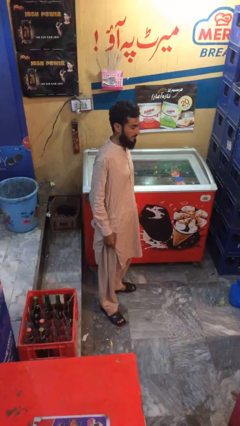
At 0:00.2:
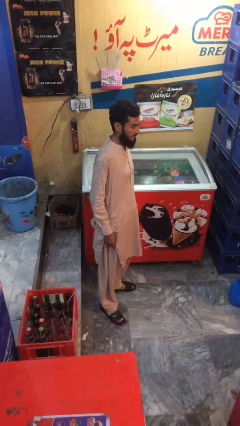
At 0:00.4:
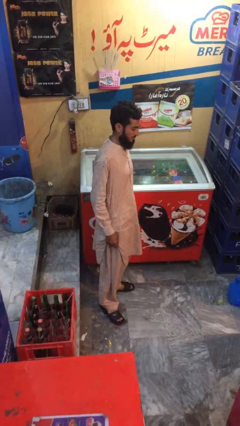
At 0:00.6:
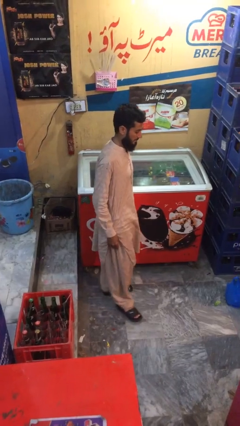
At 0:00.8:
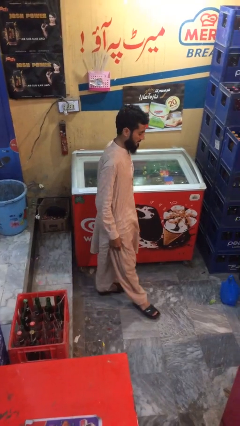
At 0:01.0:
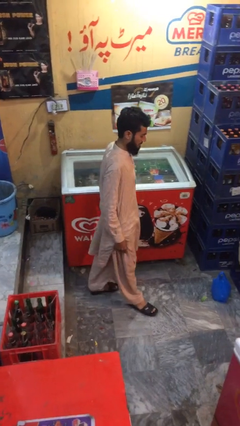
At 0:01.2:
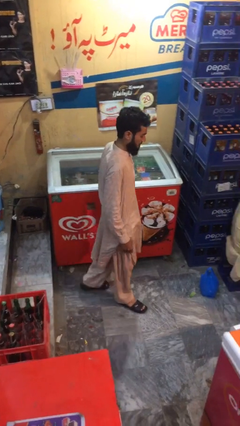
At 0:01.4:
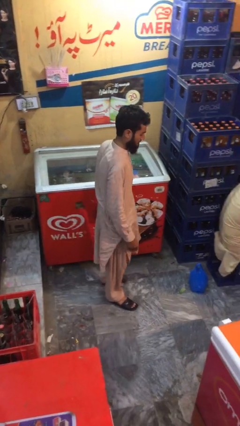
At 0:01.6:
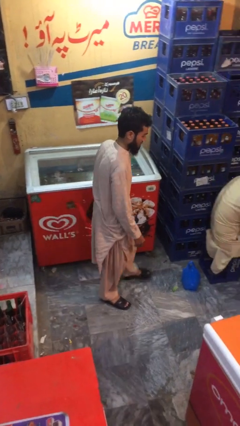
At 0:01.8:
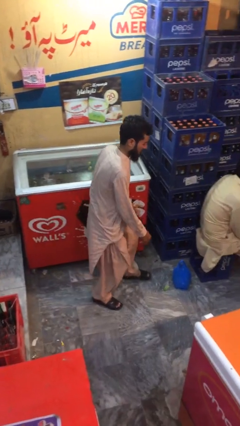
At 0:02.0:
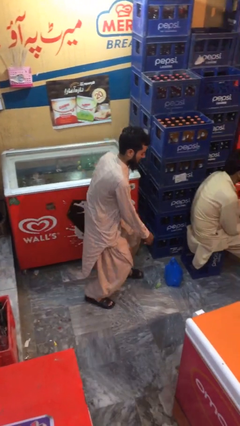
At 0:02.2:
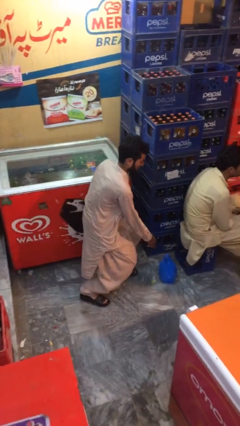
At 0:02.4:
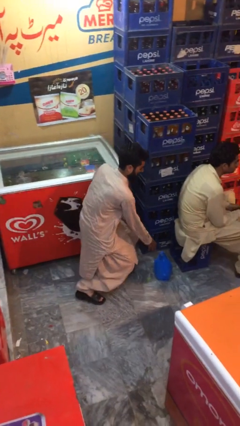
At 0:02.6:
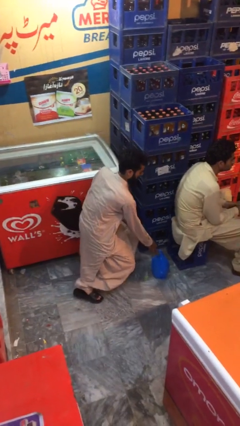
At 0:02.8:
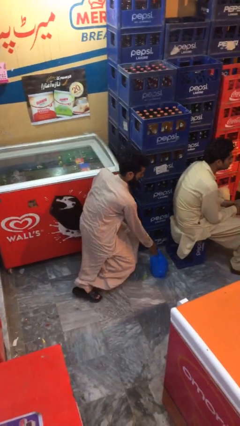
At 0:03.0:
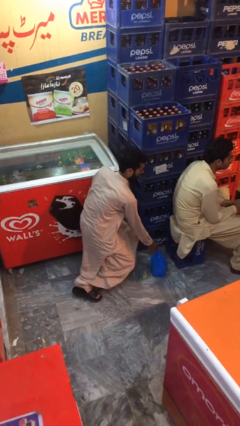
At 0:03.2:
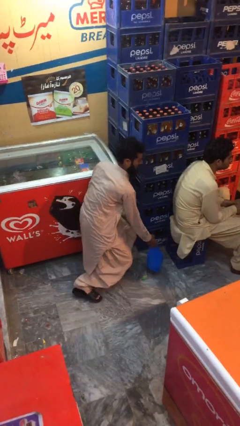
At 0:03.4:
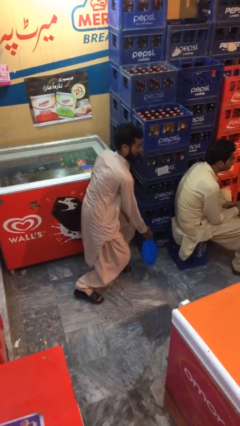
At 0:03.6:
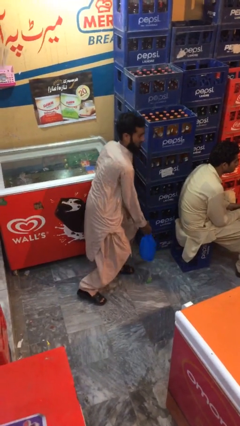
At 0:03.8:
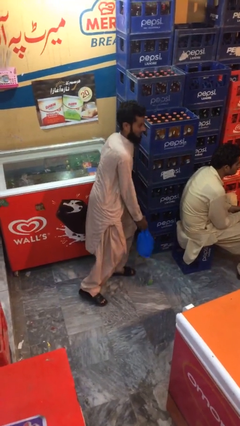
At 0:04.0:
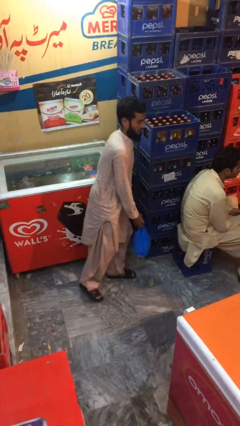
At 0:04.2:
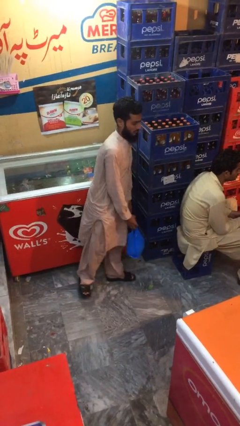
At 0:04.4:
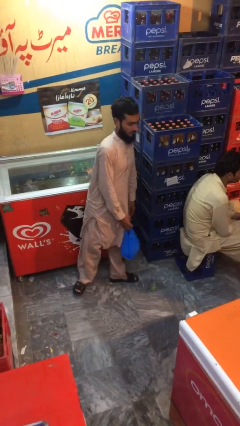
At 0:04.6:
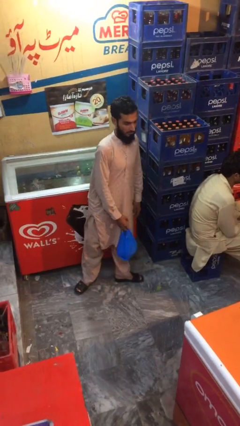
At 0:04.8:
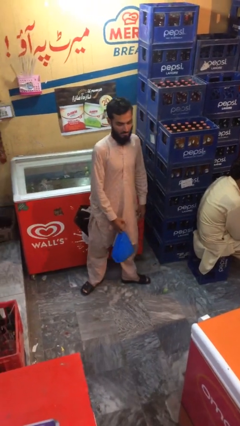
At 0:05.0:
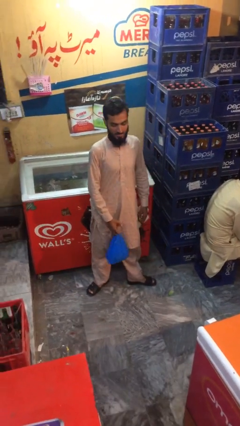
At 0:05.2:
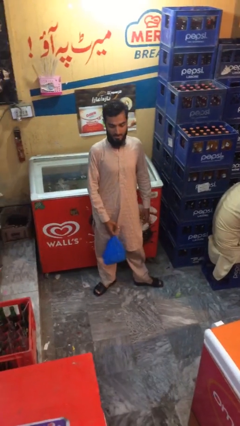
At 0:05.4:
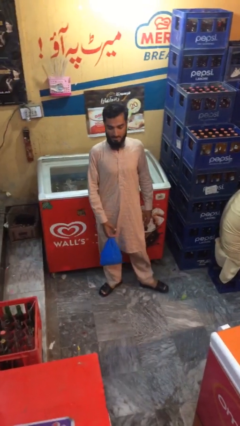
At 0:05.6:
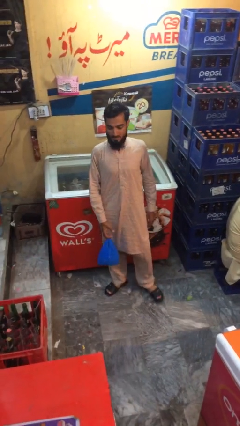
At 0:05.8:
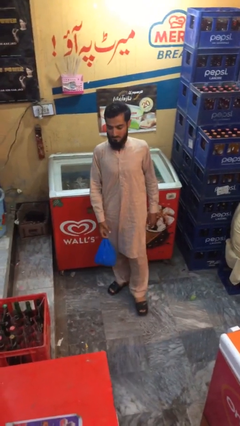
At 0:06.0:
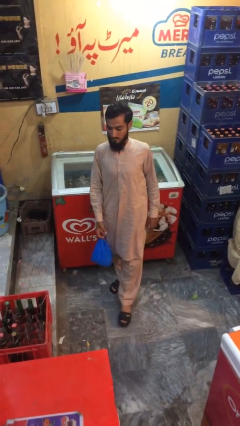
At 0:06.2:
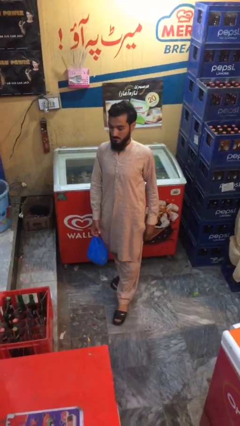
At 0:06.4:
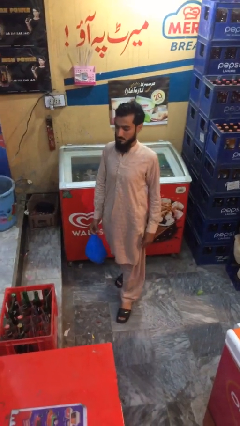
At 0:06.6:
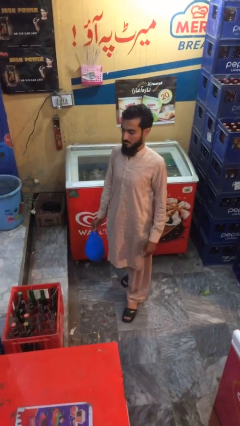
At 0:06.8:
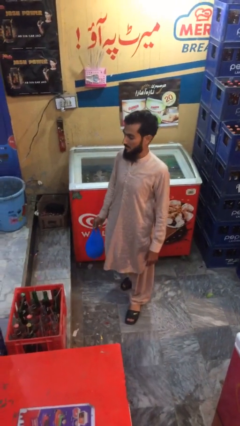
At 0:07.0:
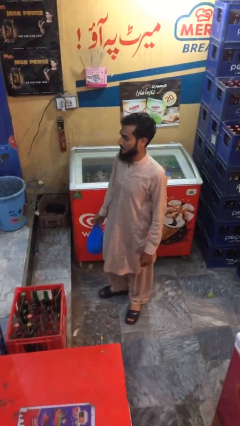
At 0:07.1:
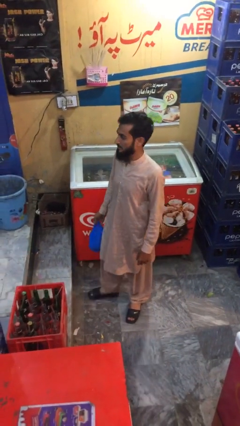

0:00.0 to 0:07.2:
person steals object from person

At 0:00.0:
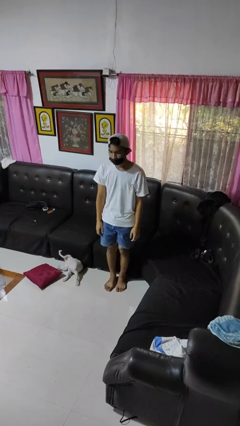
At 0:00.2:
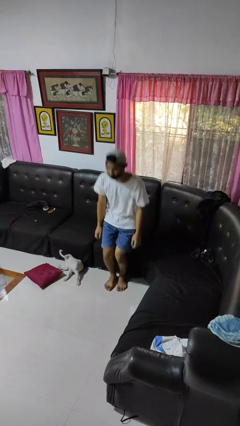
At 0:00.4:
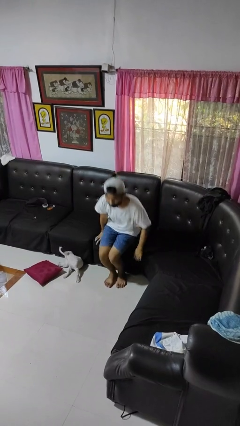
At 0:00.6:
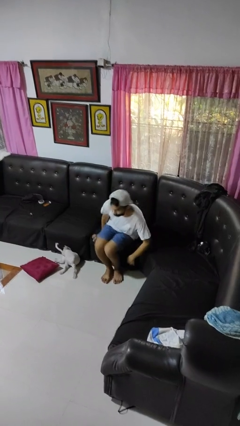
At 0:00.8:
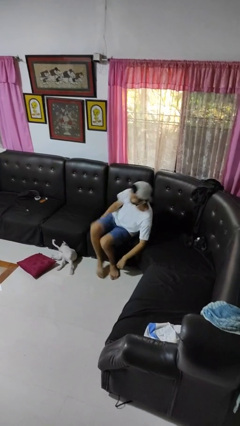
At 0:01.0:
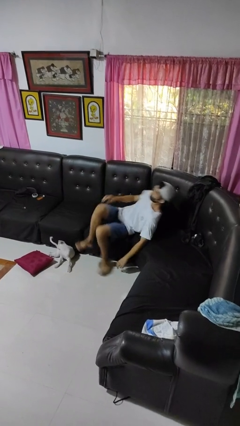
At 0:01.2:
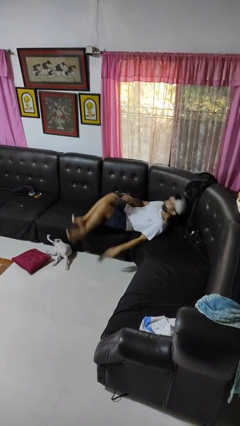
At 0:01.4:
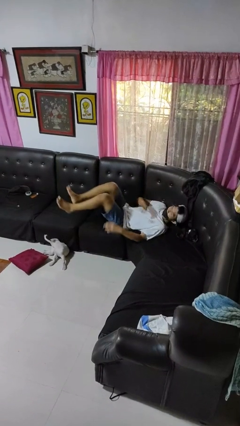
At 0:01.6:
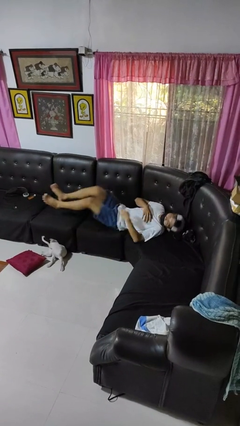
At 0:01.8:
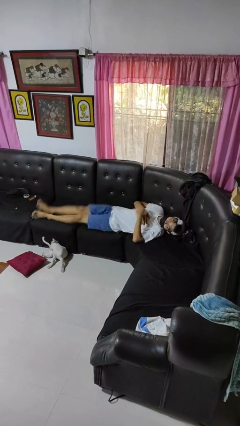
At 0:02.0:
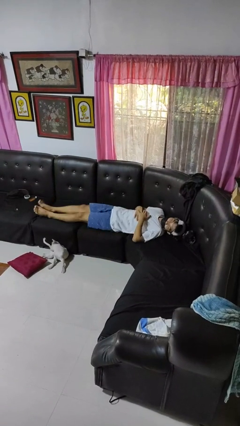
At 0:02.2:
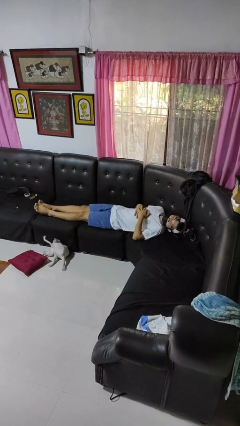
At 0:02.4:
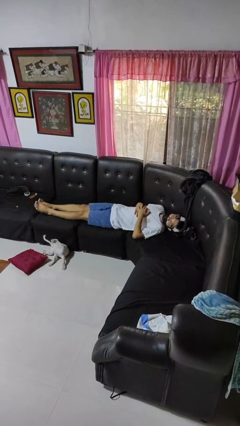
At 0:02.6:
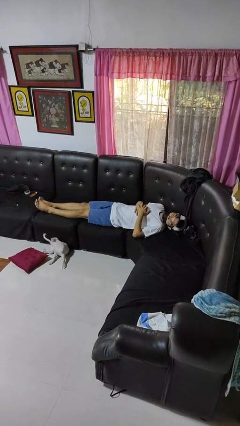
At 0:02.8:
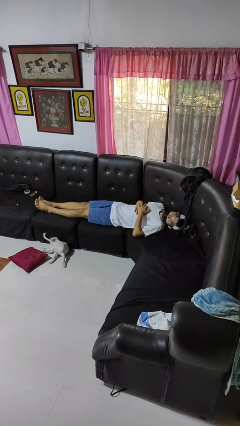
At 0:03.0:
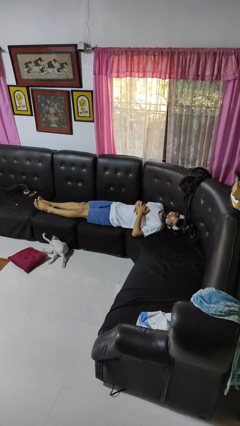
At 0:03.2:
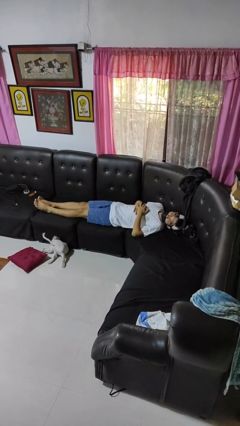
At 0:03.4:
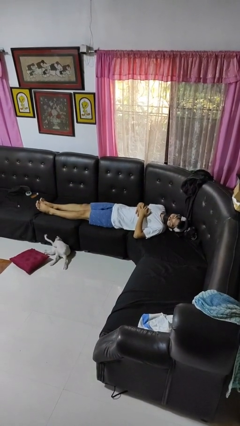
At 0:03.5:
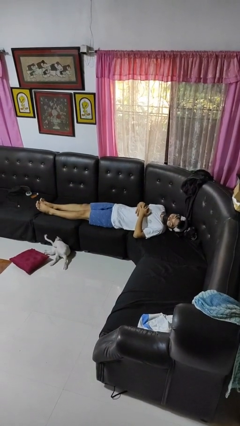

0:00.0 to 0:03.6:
person lies down on couch

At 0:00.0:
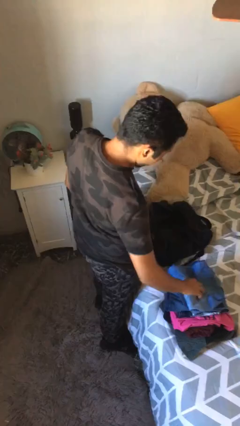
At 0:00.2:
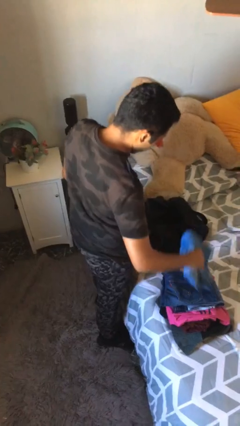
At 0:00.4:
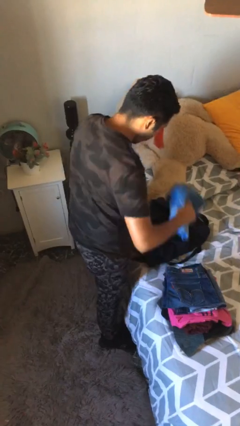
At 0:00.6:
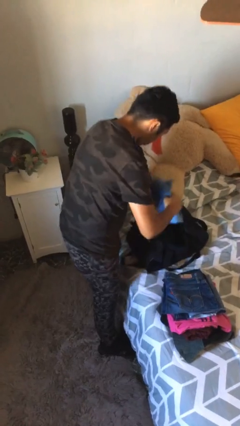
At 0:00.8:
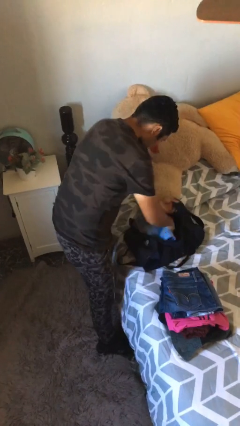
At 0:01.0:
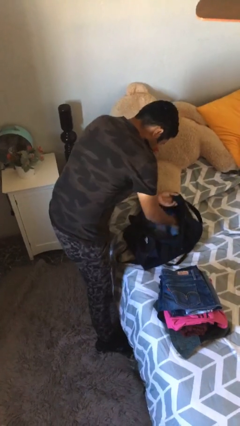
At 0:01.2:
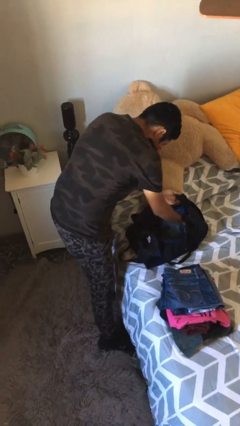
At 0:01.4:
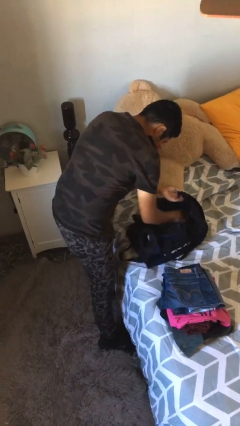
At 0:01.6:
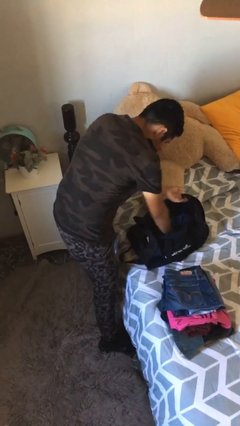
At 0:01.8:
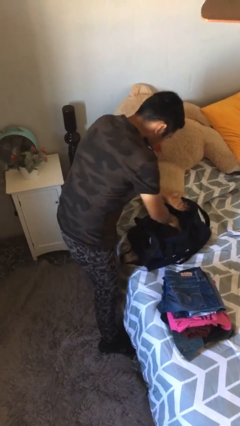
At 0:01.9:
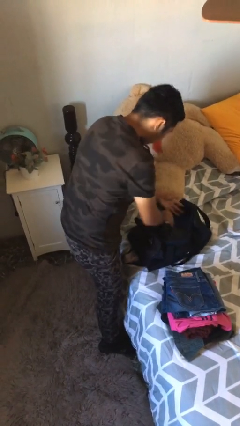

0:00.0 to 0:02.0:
person loads clothes into suitcase

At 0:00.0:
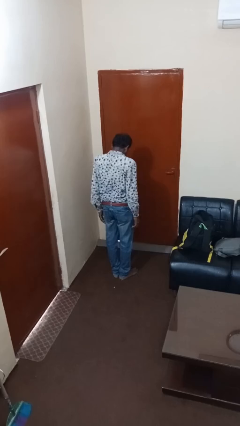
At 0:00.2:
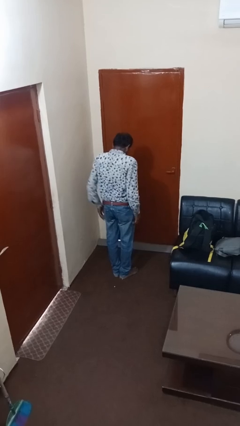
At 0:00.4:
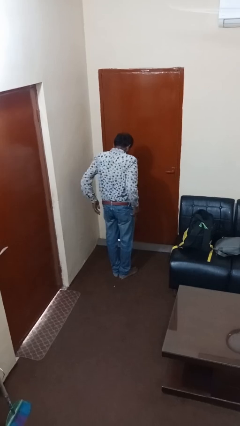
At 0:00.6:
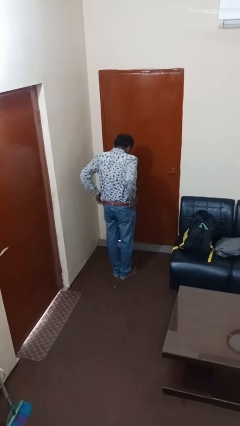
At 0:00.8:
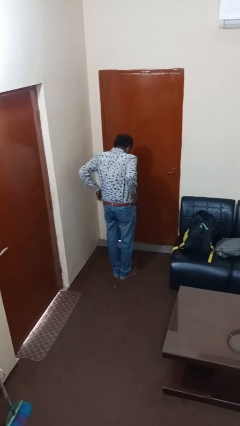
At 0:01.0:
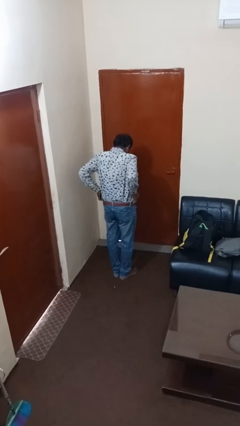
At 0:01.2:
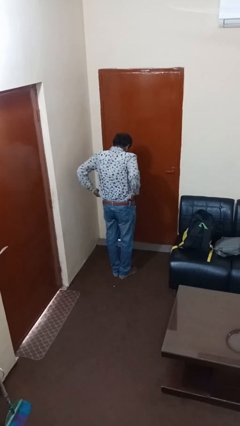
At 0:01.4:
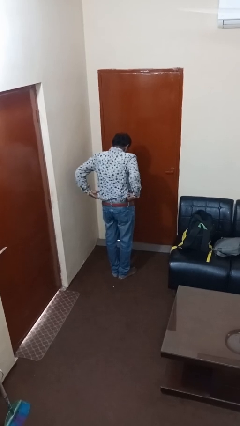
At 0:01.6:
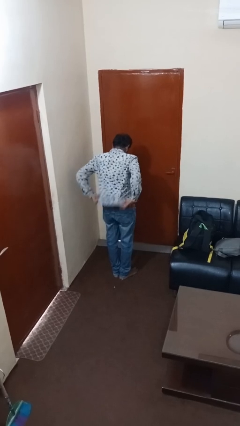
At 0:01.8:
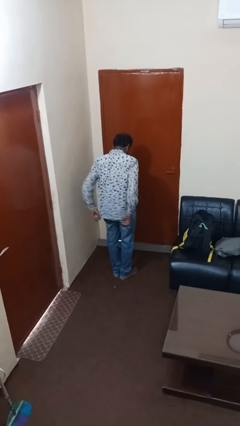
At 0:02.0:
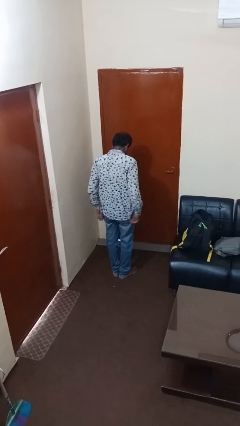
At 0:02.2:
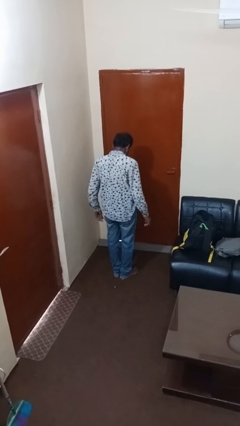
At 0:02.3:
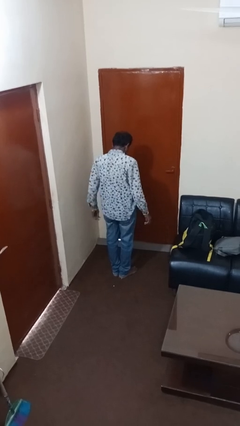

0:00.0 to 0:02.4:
person untucks shirt

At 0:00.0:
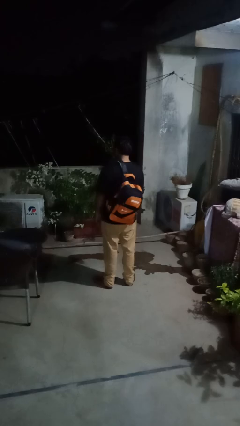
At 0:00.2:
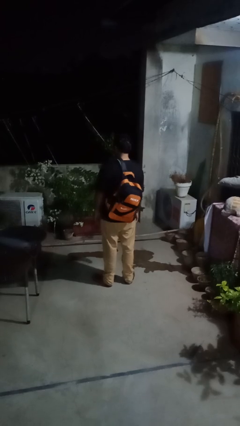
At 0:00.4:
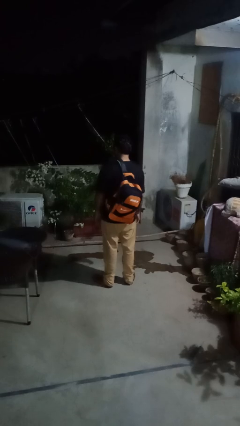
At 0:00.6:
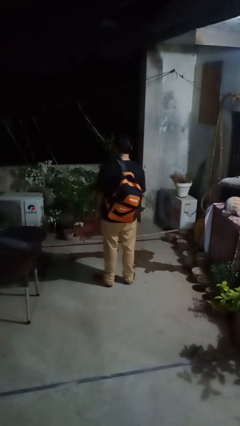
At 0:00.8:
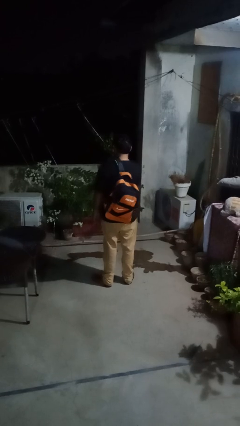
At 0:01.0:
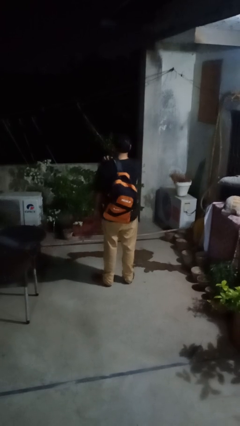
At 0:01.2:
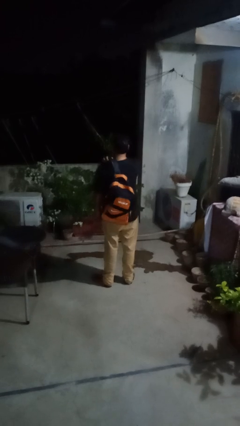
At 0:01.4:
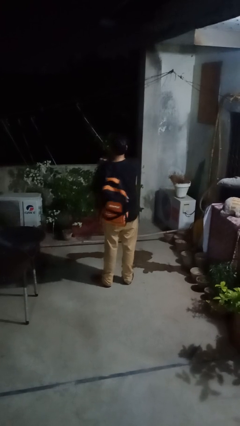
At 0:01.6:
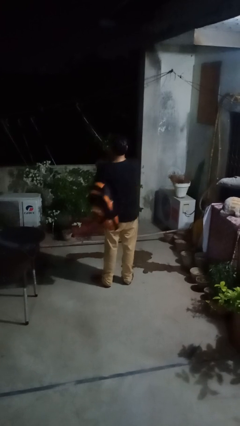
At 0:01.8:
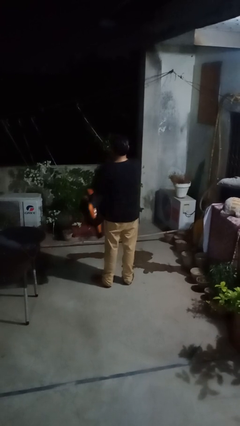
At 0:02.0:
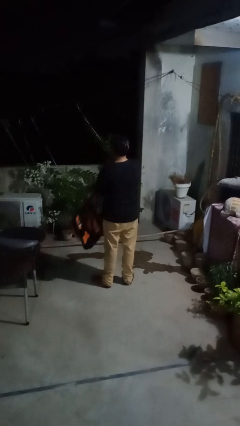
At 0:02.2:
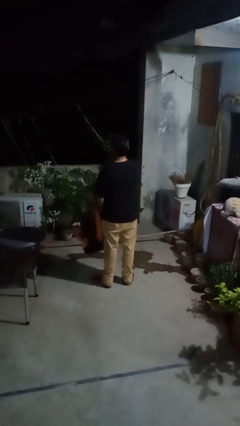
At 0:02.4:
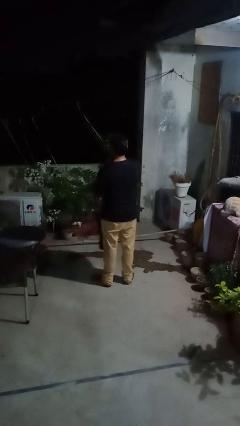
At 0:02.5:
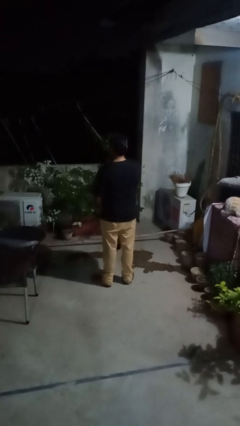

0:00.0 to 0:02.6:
person takes off backpack
